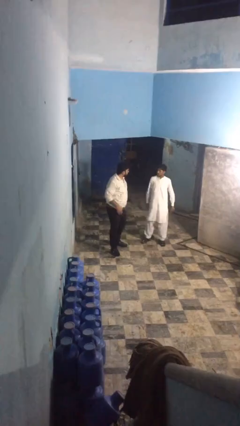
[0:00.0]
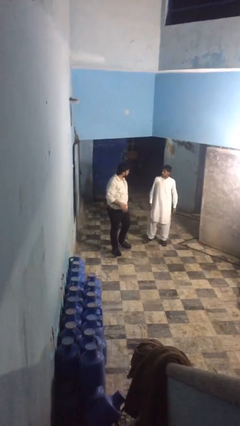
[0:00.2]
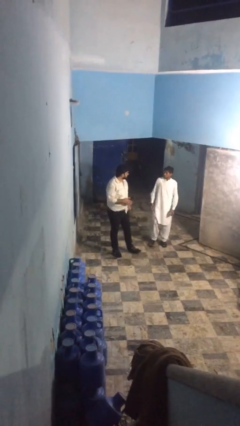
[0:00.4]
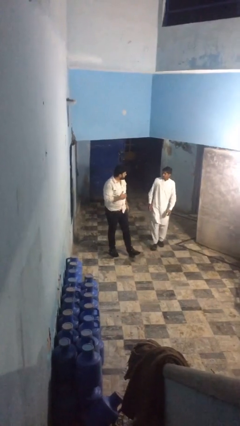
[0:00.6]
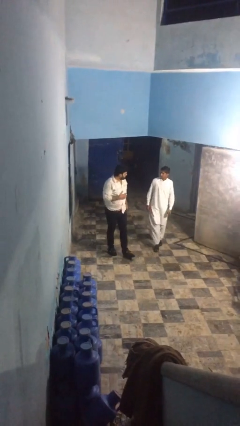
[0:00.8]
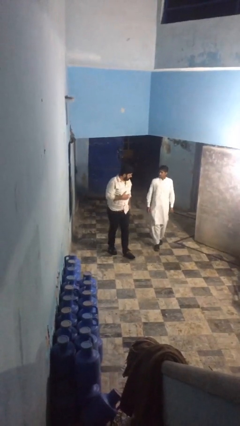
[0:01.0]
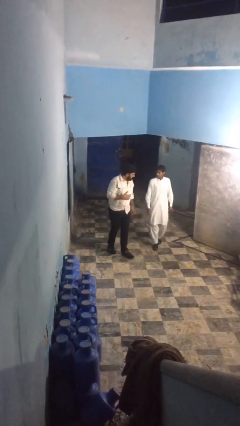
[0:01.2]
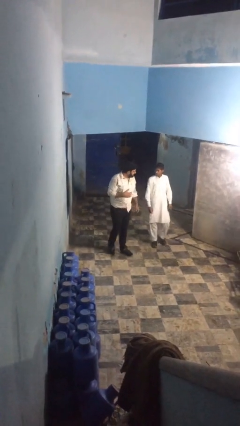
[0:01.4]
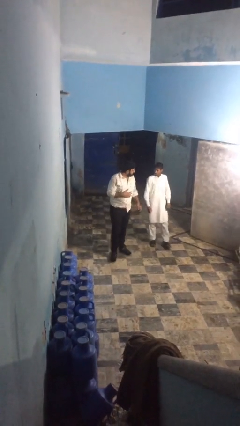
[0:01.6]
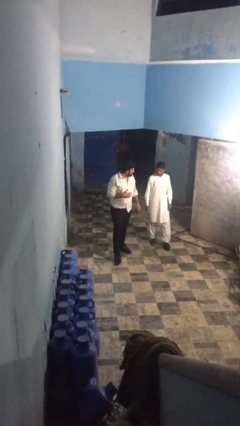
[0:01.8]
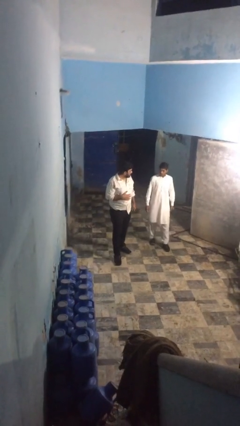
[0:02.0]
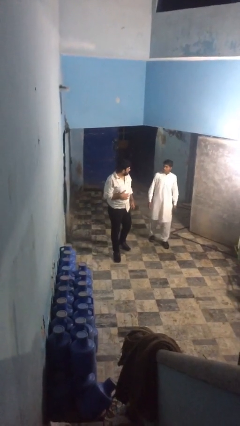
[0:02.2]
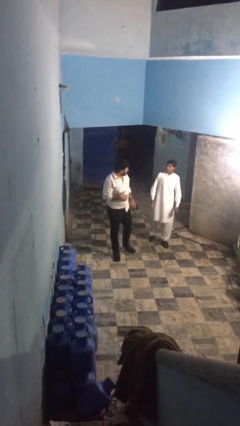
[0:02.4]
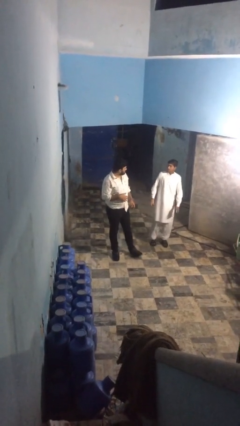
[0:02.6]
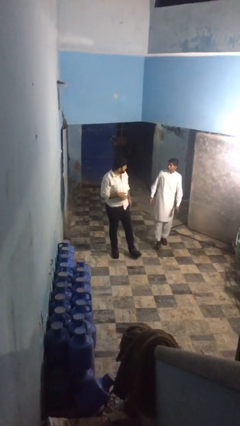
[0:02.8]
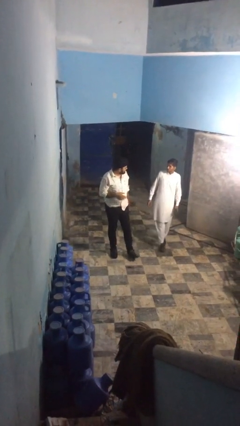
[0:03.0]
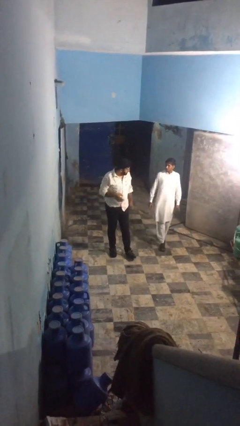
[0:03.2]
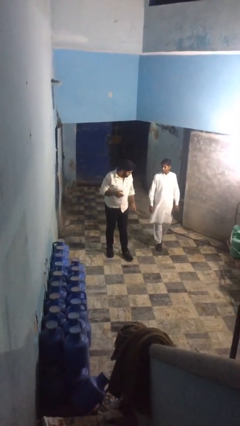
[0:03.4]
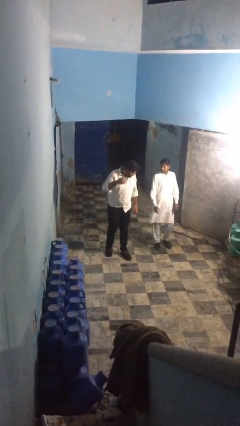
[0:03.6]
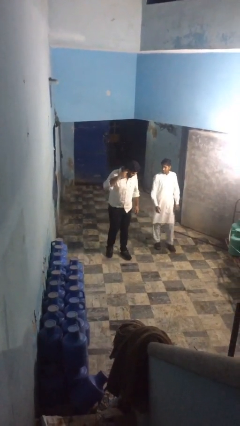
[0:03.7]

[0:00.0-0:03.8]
person talks to person

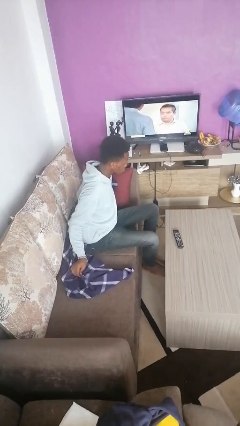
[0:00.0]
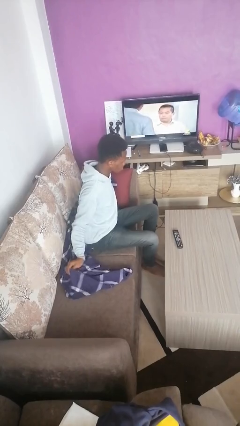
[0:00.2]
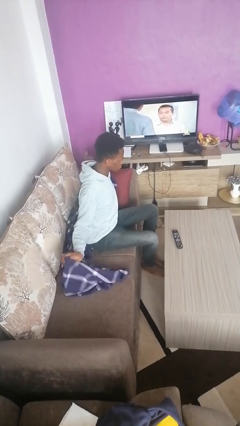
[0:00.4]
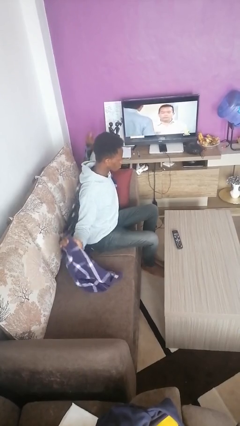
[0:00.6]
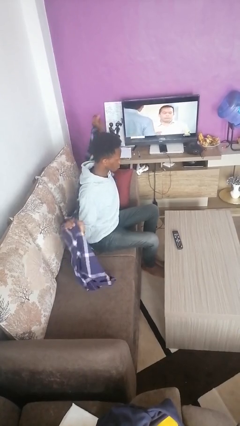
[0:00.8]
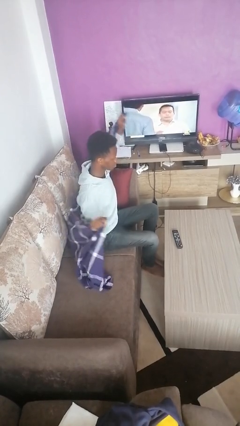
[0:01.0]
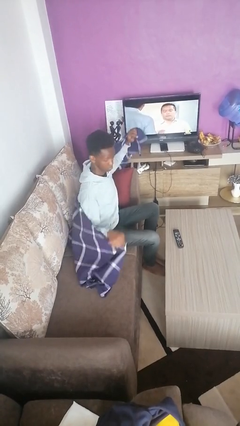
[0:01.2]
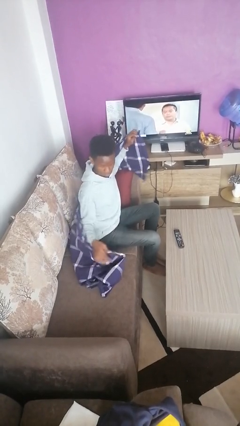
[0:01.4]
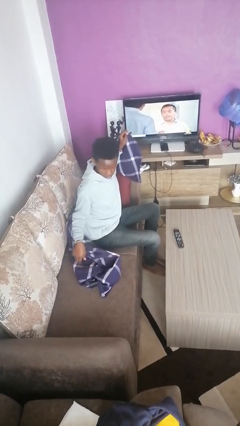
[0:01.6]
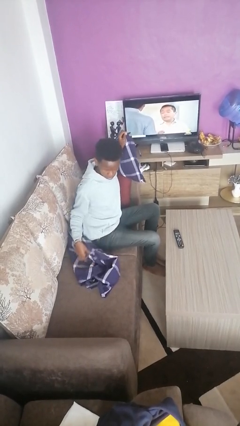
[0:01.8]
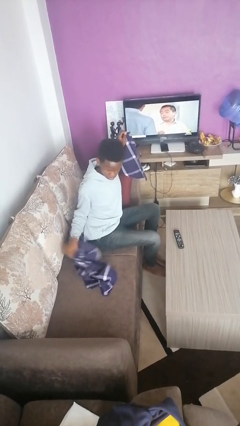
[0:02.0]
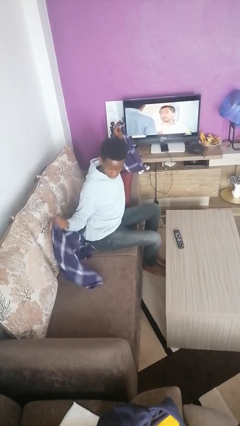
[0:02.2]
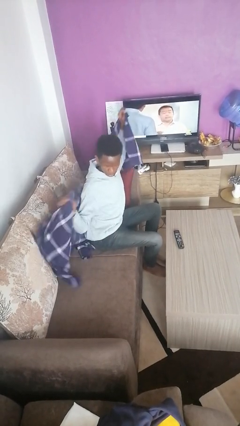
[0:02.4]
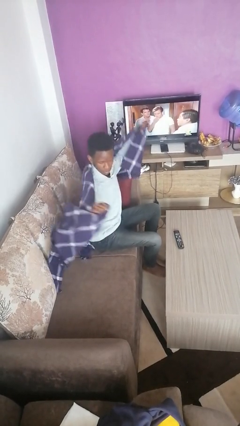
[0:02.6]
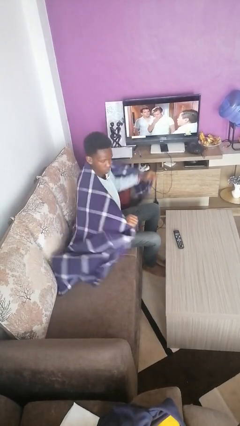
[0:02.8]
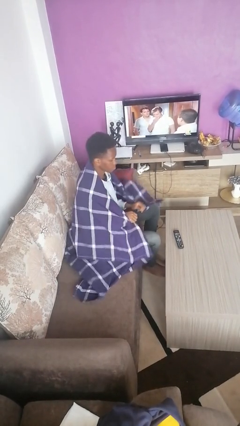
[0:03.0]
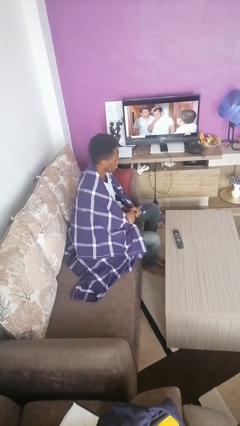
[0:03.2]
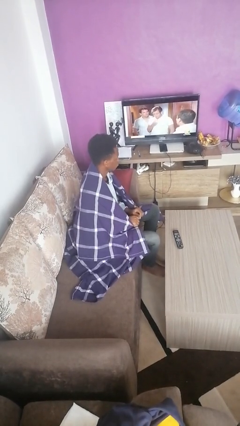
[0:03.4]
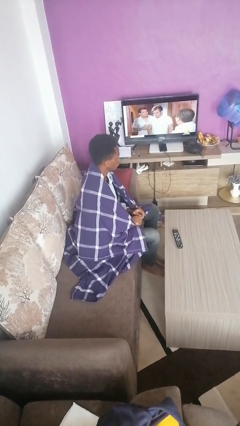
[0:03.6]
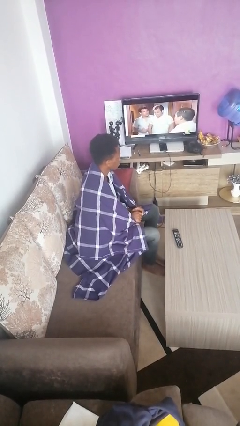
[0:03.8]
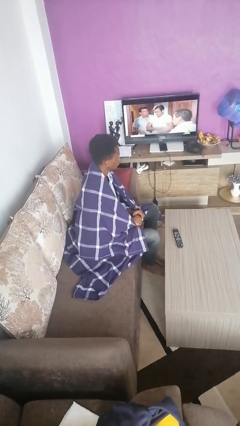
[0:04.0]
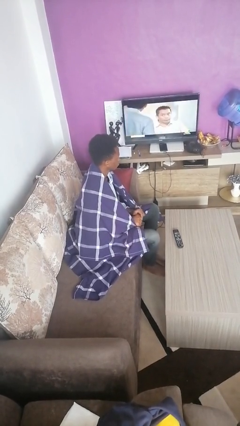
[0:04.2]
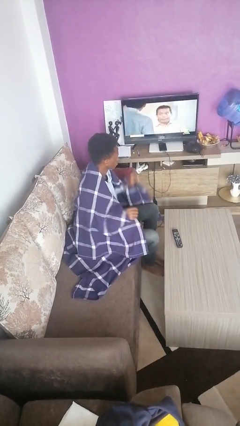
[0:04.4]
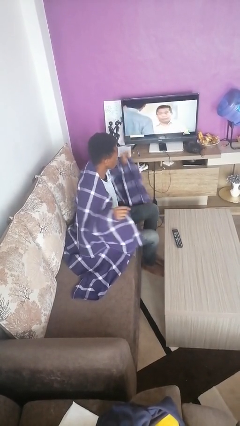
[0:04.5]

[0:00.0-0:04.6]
person covers with blanket

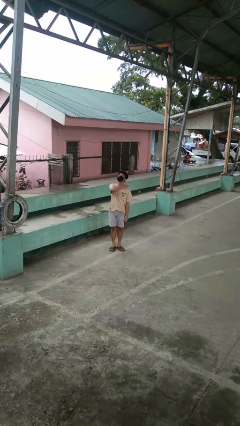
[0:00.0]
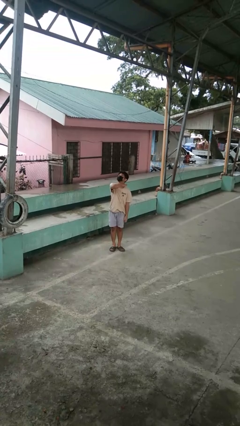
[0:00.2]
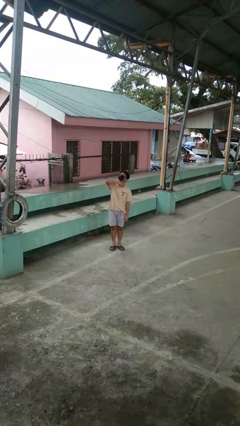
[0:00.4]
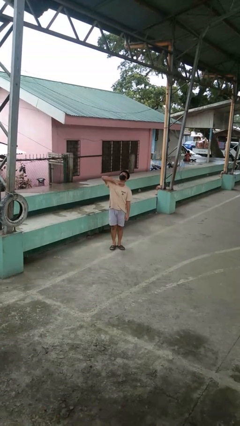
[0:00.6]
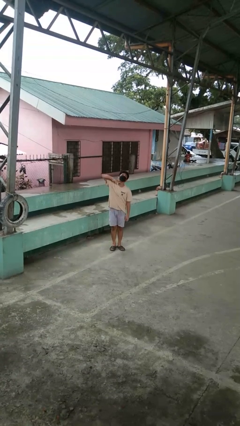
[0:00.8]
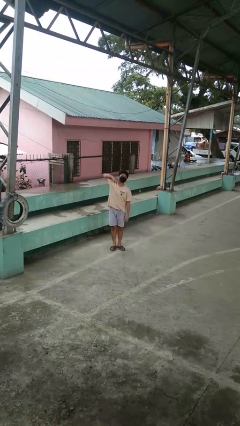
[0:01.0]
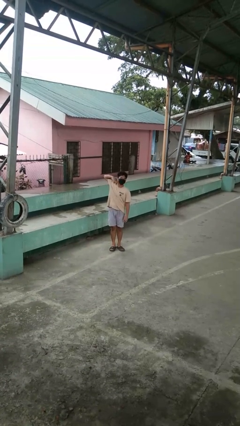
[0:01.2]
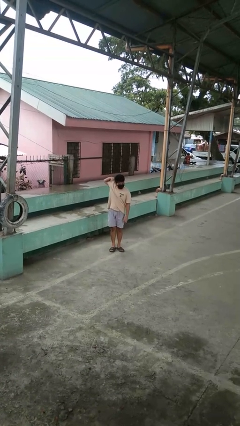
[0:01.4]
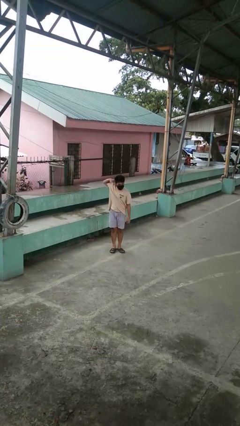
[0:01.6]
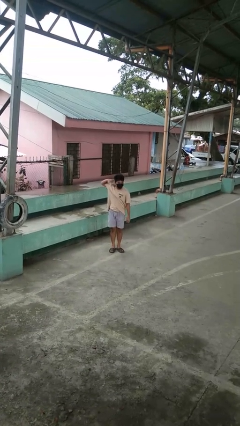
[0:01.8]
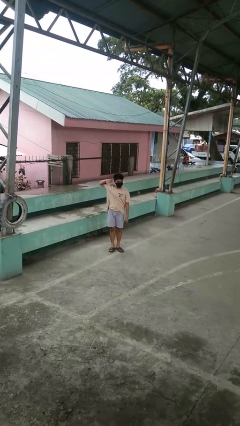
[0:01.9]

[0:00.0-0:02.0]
person gestures cut

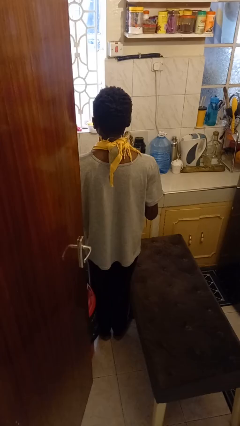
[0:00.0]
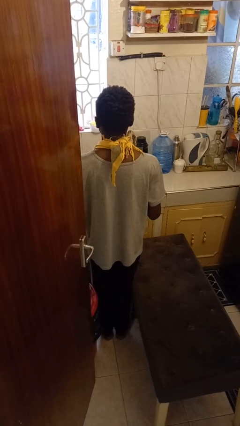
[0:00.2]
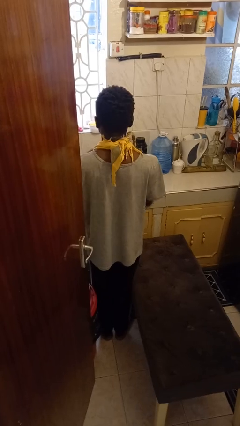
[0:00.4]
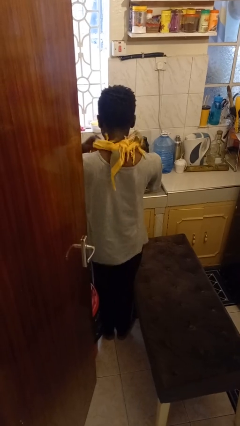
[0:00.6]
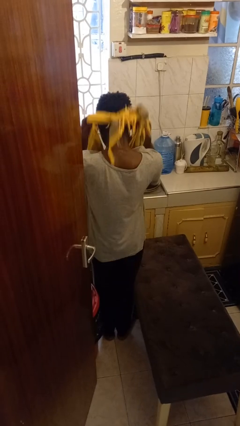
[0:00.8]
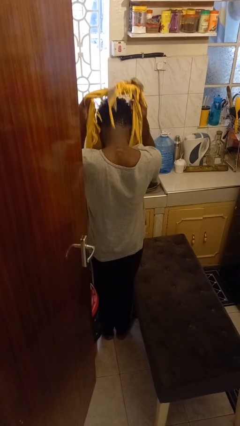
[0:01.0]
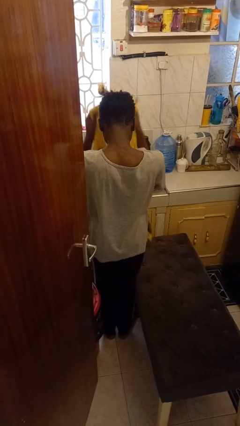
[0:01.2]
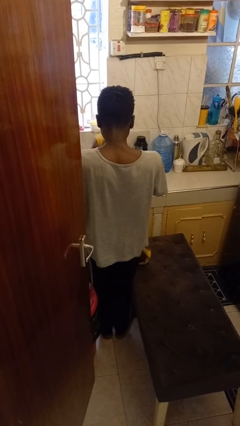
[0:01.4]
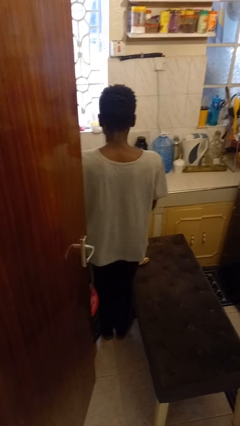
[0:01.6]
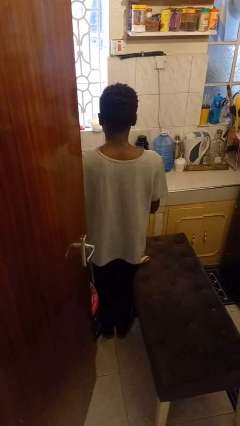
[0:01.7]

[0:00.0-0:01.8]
person takes off apron

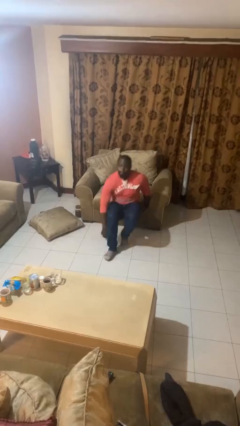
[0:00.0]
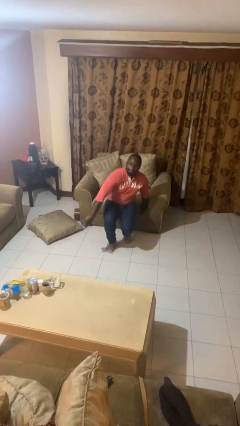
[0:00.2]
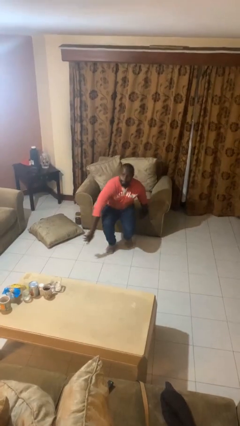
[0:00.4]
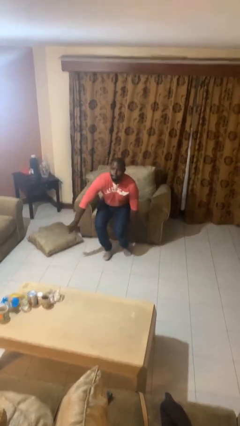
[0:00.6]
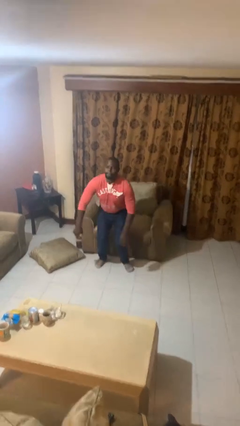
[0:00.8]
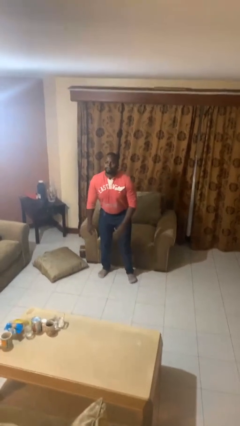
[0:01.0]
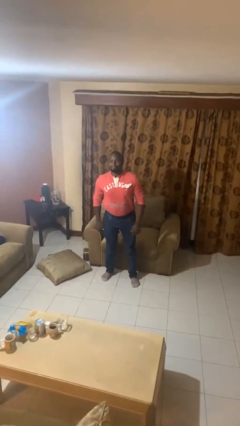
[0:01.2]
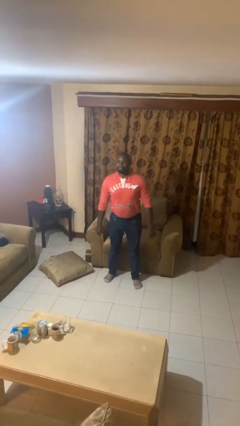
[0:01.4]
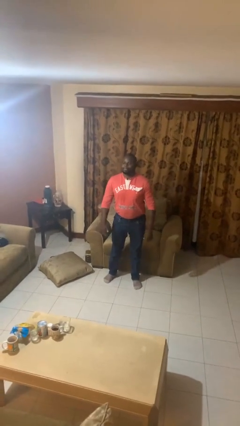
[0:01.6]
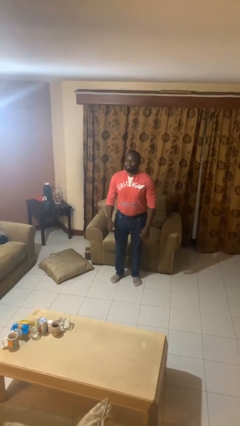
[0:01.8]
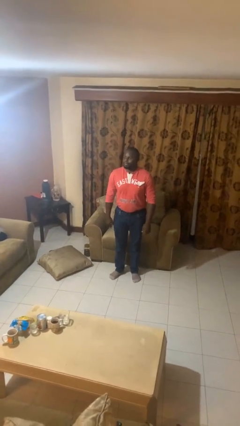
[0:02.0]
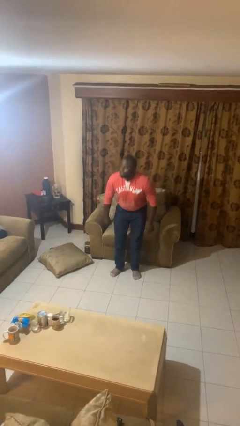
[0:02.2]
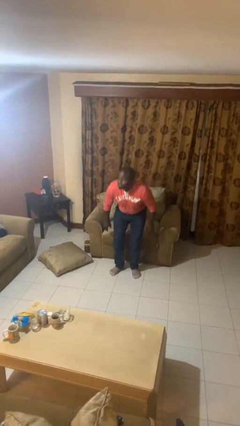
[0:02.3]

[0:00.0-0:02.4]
person stands up from floor

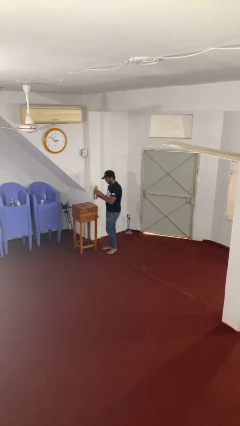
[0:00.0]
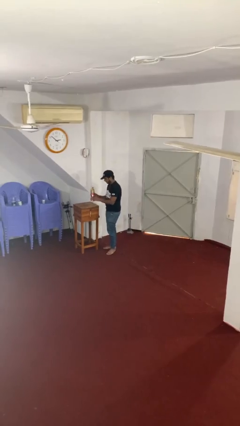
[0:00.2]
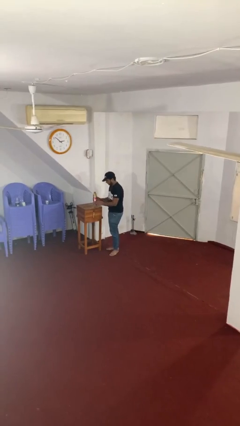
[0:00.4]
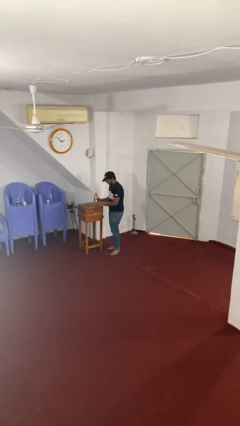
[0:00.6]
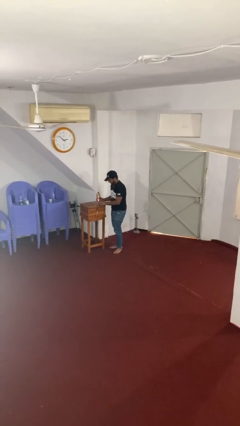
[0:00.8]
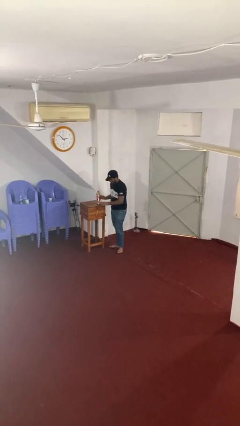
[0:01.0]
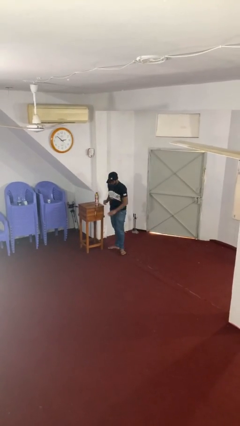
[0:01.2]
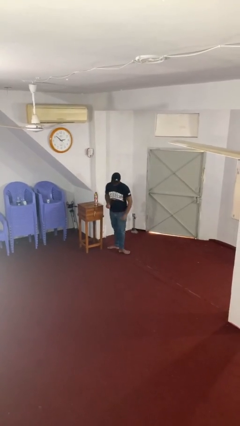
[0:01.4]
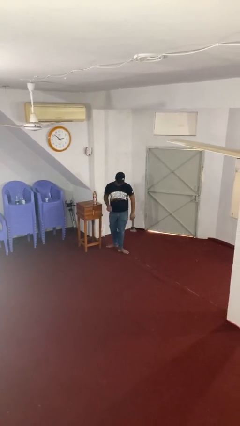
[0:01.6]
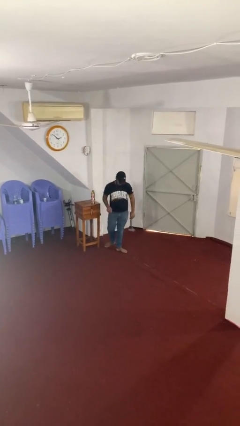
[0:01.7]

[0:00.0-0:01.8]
person puts down object on table

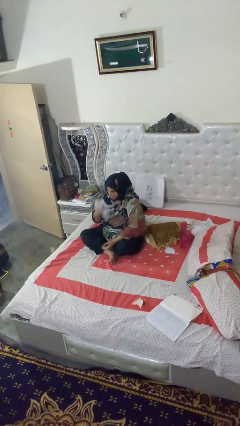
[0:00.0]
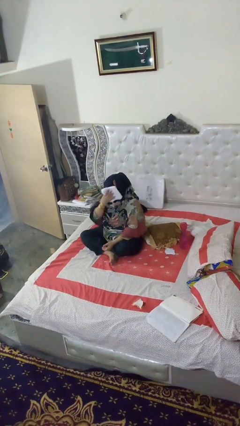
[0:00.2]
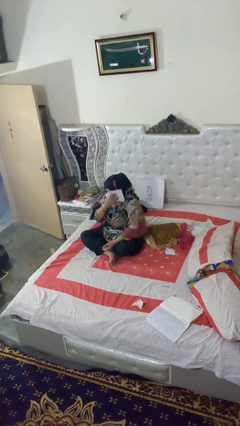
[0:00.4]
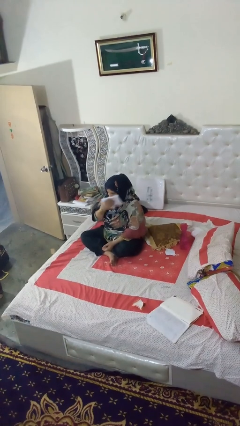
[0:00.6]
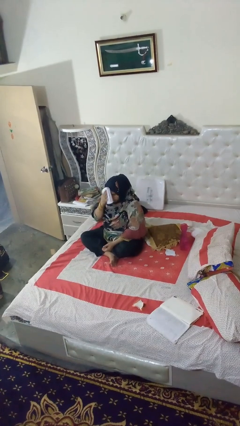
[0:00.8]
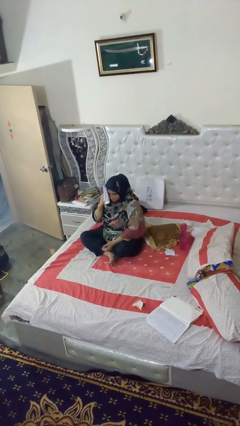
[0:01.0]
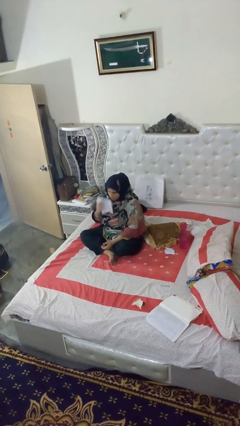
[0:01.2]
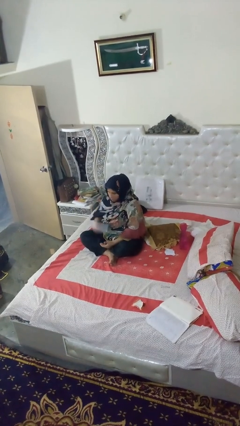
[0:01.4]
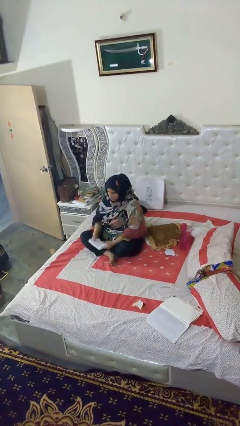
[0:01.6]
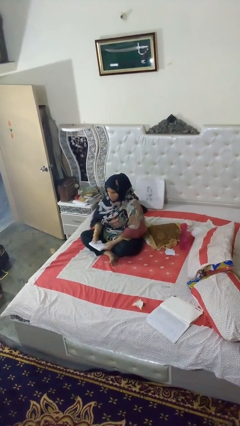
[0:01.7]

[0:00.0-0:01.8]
person wipes mouth with napkin
